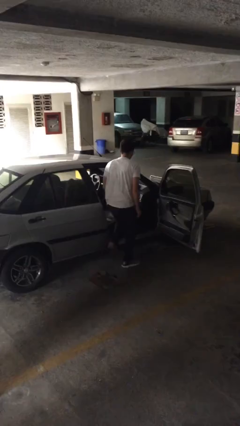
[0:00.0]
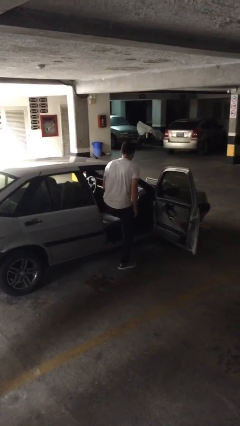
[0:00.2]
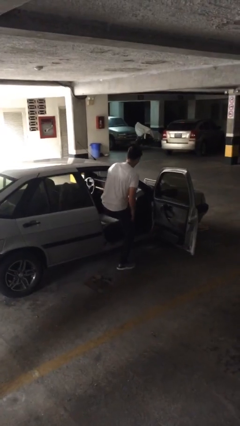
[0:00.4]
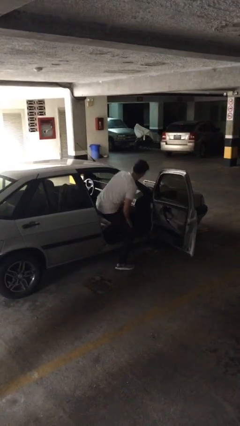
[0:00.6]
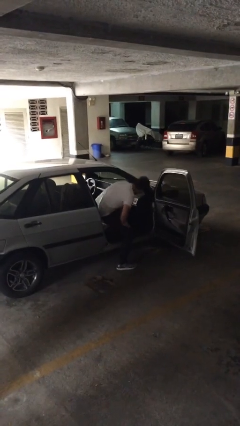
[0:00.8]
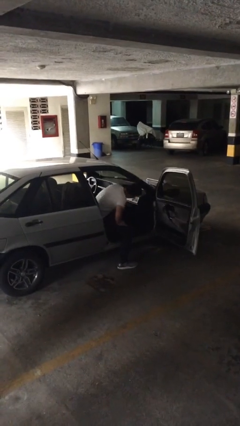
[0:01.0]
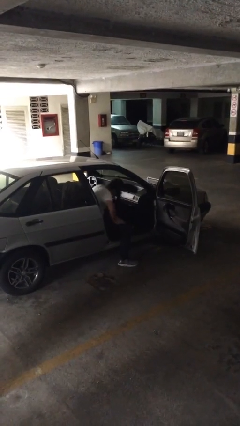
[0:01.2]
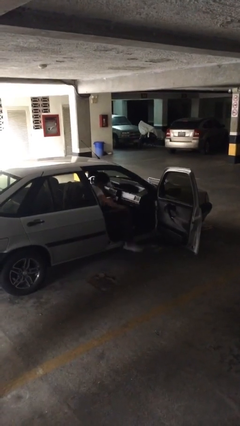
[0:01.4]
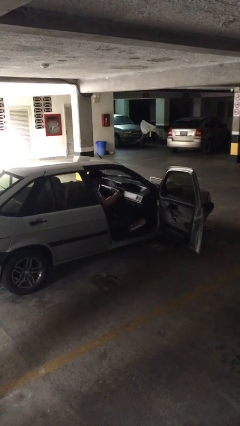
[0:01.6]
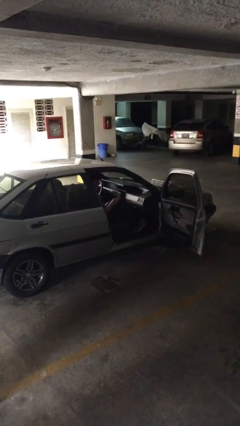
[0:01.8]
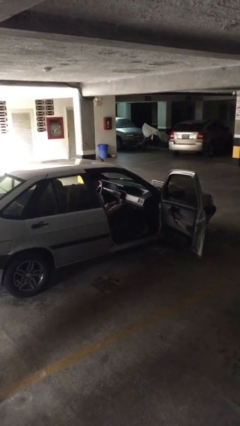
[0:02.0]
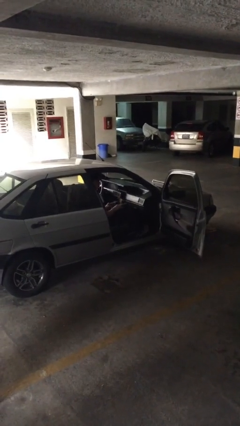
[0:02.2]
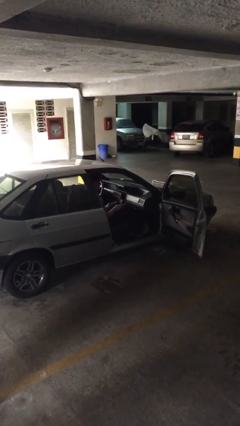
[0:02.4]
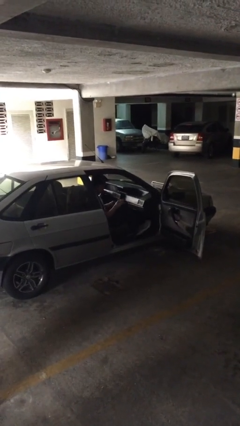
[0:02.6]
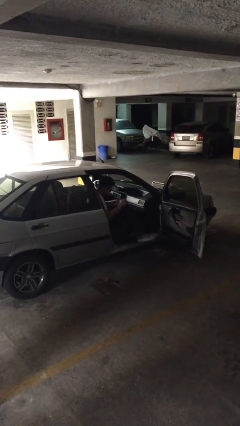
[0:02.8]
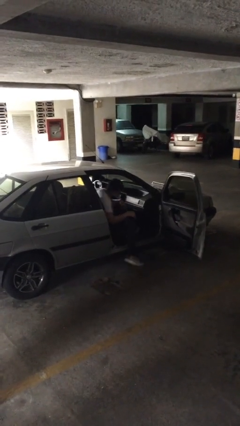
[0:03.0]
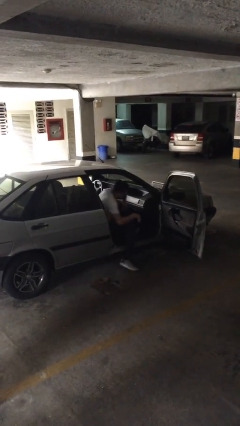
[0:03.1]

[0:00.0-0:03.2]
person enters car

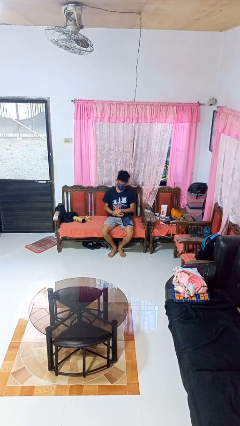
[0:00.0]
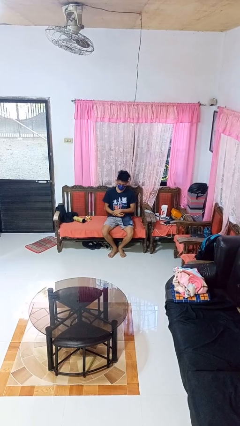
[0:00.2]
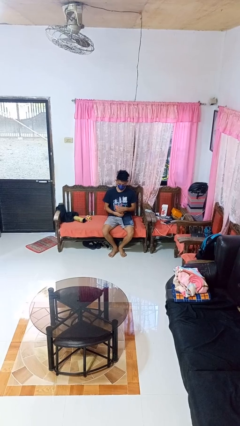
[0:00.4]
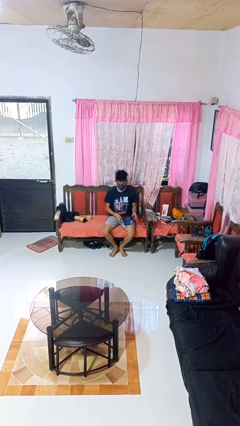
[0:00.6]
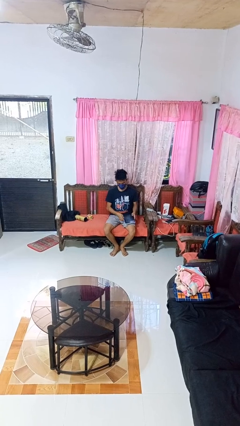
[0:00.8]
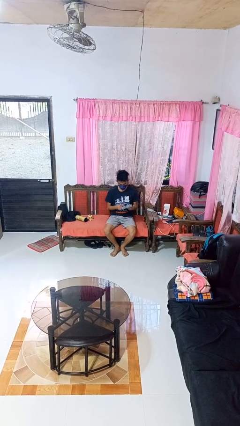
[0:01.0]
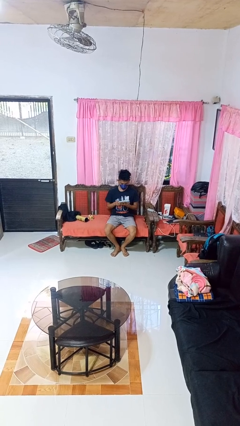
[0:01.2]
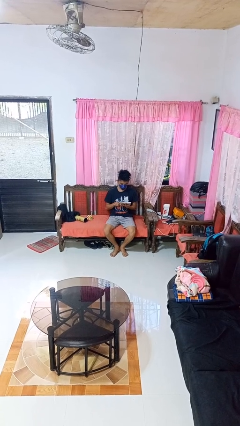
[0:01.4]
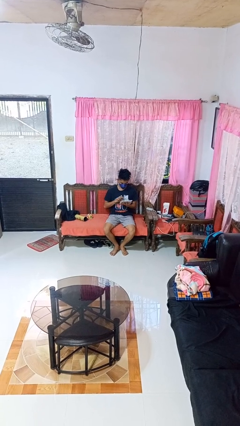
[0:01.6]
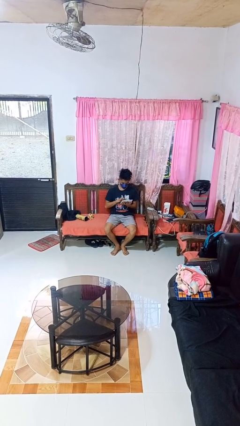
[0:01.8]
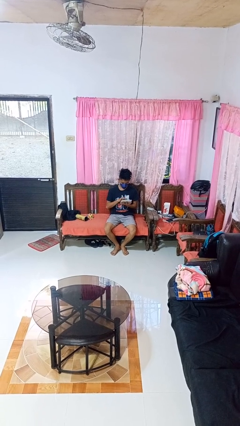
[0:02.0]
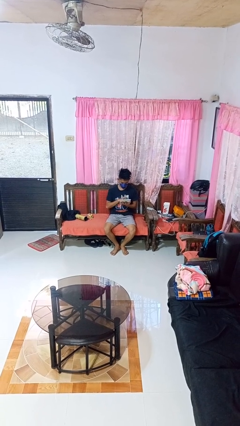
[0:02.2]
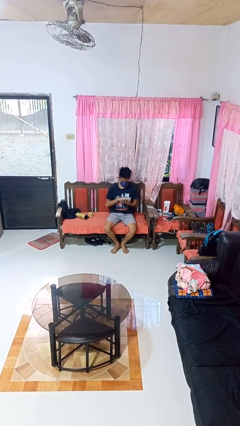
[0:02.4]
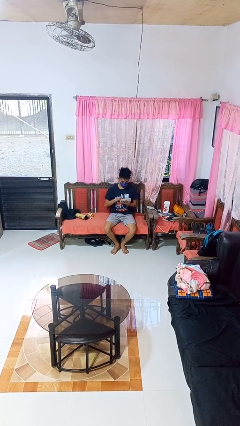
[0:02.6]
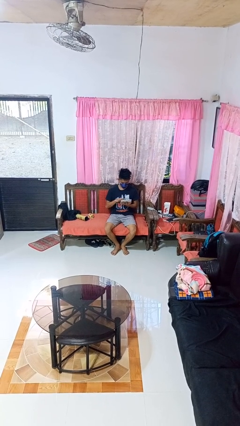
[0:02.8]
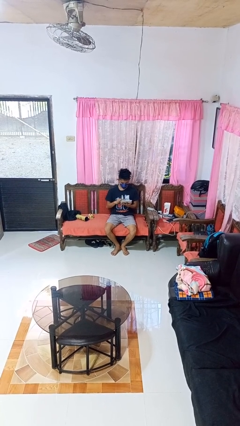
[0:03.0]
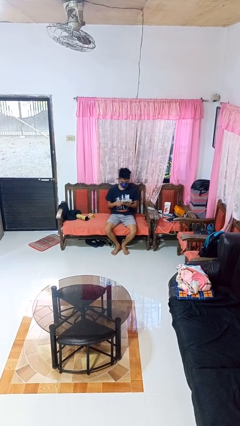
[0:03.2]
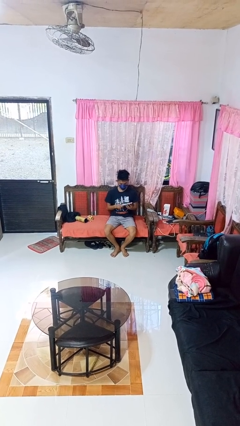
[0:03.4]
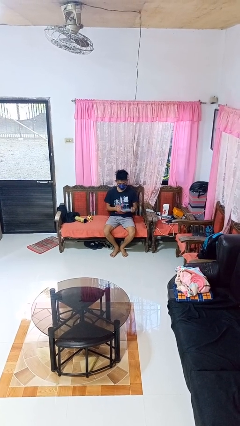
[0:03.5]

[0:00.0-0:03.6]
person interacts with tablet

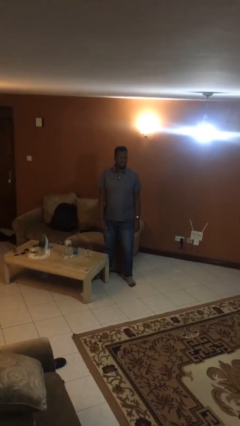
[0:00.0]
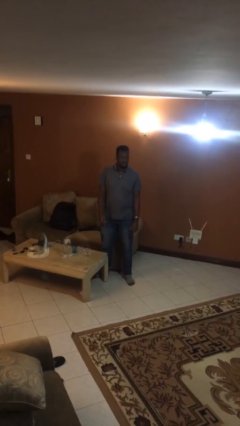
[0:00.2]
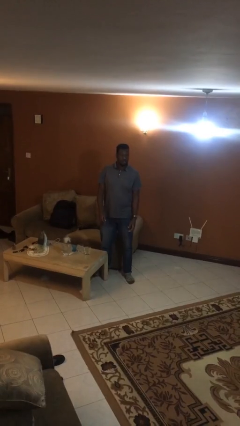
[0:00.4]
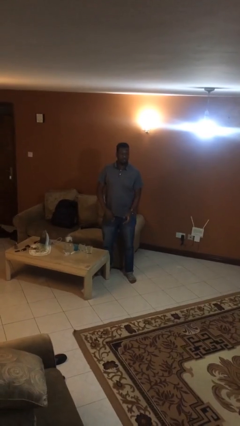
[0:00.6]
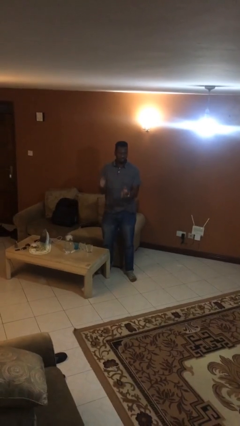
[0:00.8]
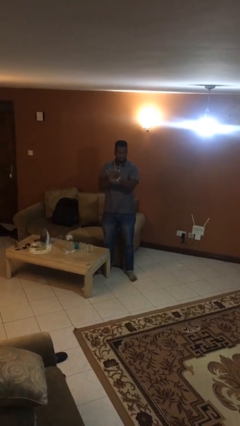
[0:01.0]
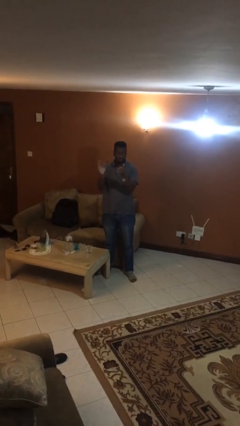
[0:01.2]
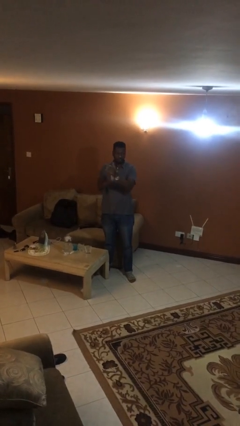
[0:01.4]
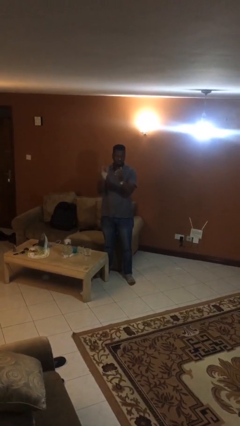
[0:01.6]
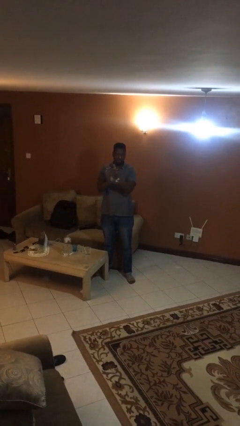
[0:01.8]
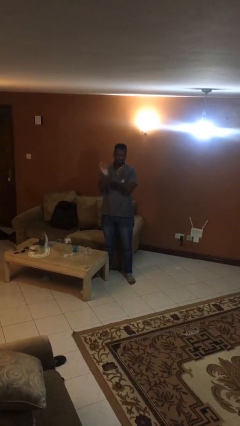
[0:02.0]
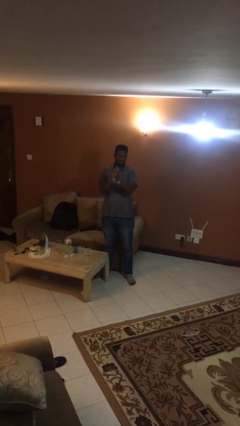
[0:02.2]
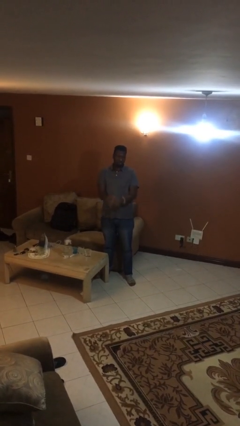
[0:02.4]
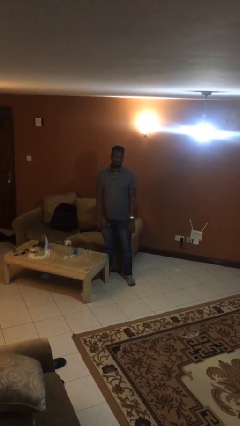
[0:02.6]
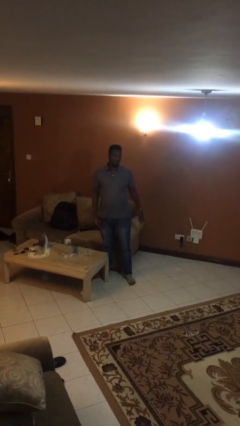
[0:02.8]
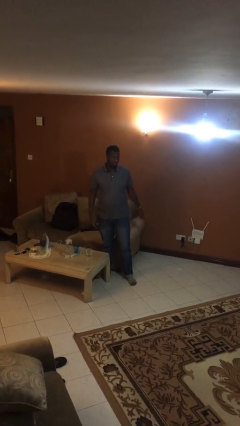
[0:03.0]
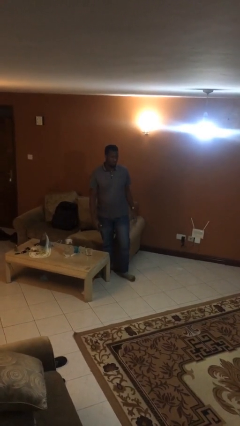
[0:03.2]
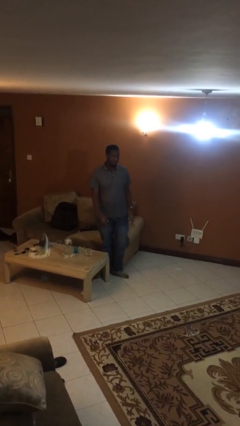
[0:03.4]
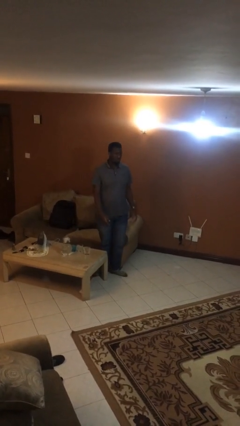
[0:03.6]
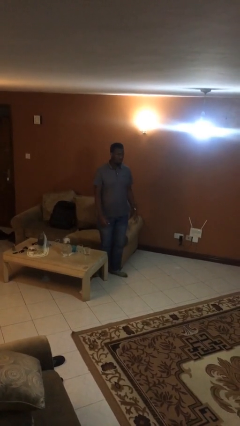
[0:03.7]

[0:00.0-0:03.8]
person claps hands

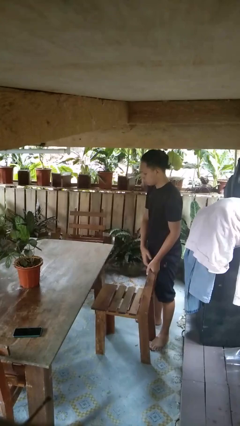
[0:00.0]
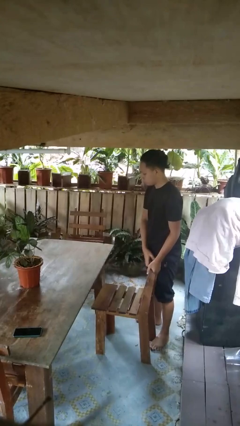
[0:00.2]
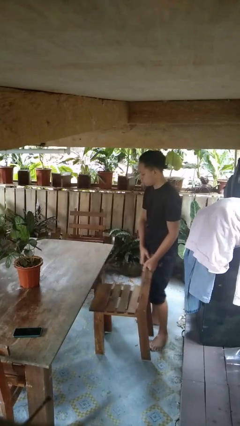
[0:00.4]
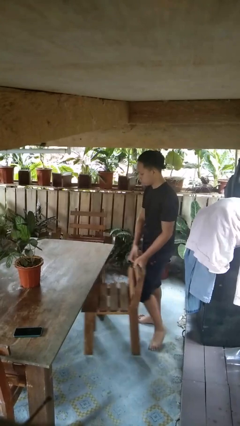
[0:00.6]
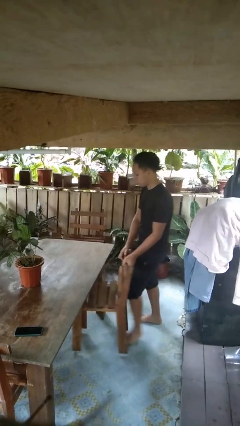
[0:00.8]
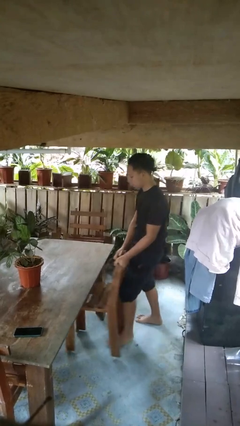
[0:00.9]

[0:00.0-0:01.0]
person pushes in chair

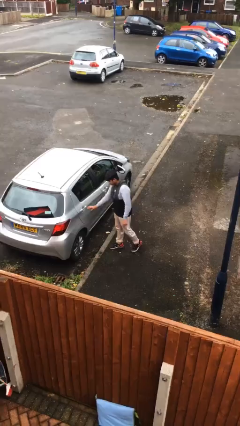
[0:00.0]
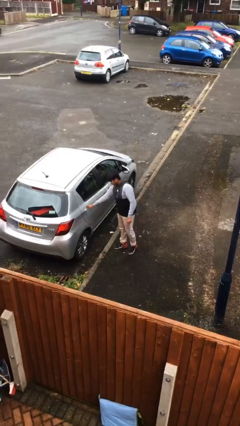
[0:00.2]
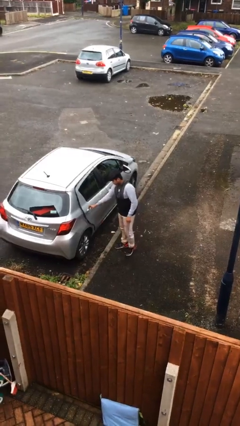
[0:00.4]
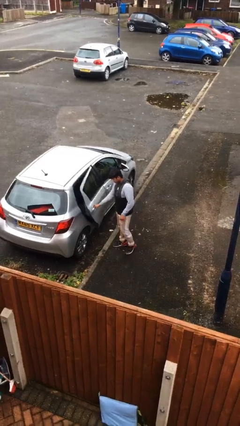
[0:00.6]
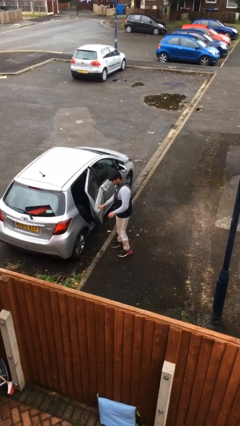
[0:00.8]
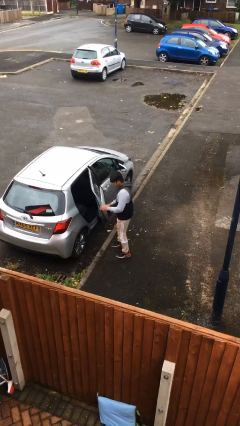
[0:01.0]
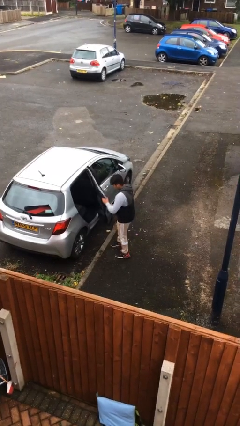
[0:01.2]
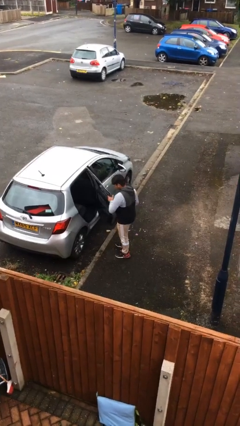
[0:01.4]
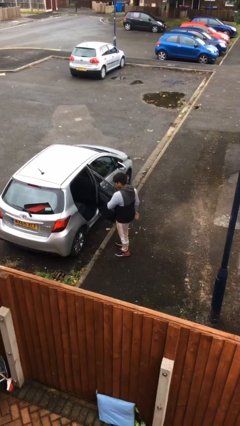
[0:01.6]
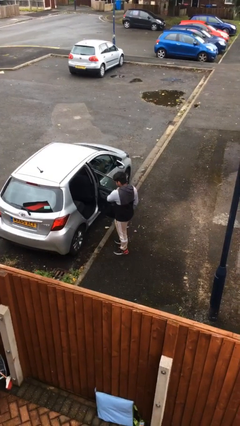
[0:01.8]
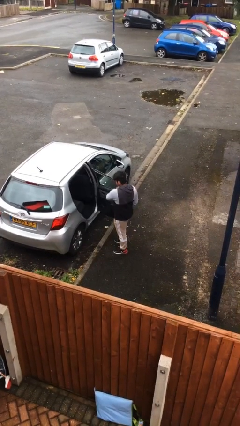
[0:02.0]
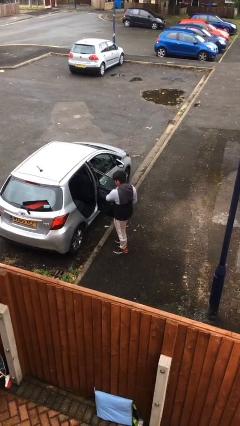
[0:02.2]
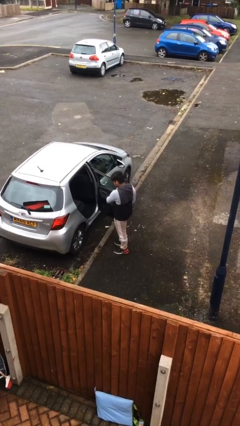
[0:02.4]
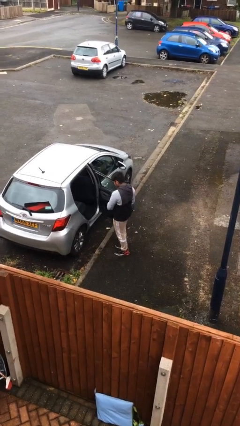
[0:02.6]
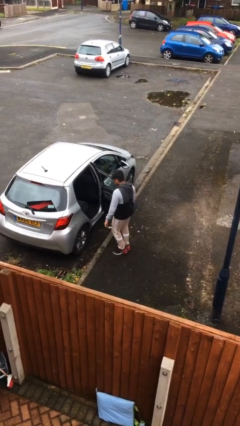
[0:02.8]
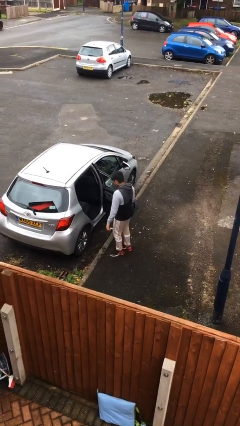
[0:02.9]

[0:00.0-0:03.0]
person opens car door

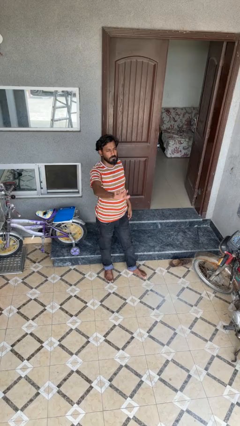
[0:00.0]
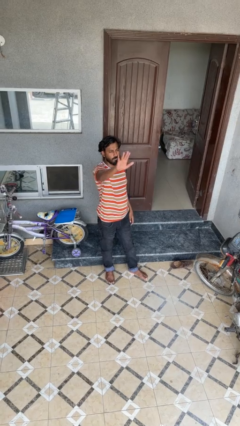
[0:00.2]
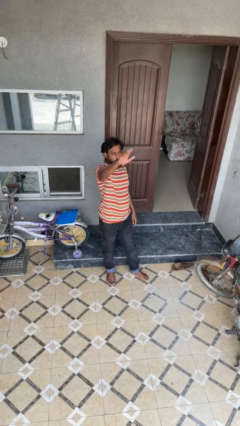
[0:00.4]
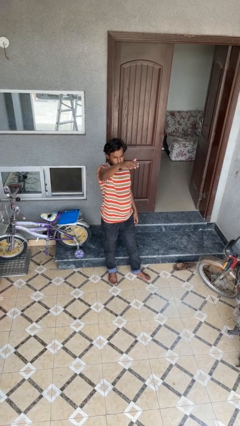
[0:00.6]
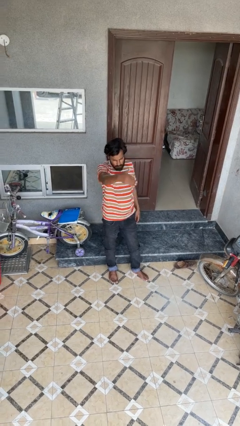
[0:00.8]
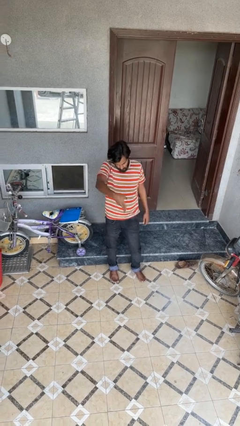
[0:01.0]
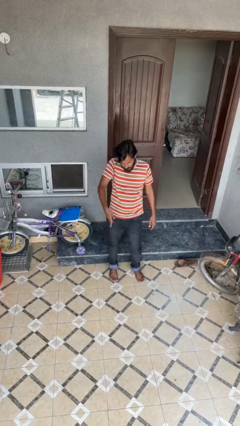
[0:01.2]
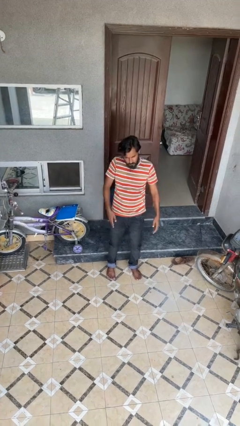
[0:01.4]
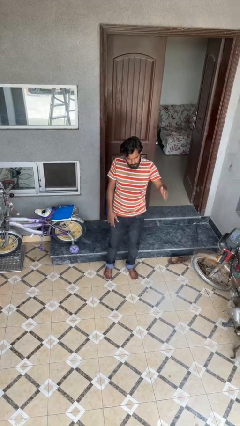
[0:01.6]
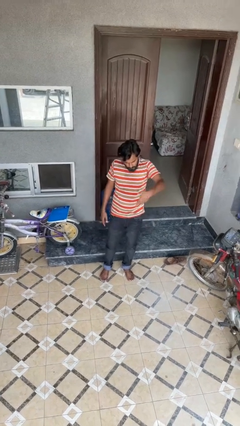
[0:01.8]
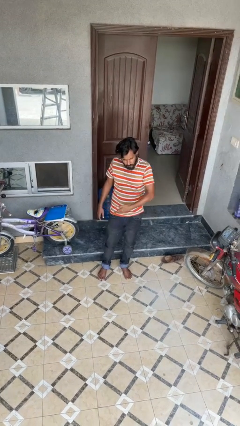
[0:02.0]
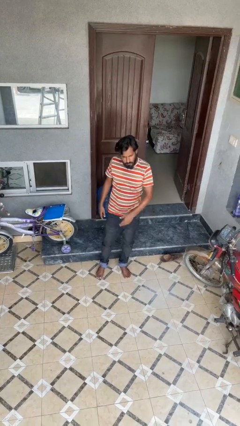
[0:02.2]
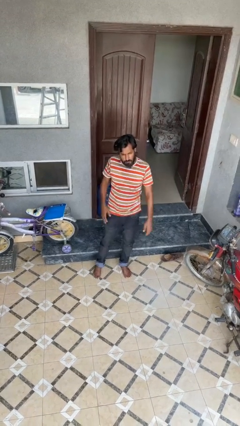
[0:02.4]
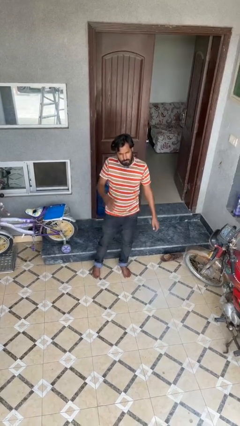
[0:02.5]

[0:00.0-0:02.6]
person gestures come here
